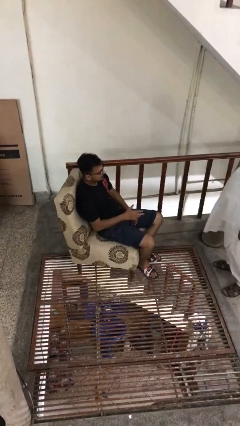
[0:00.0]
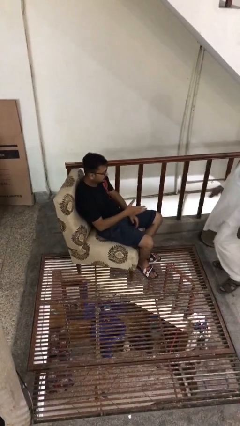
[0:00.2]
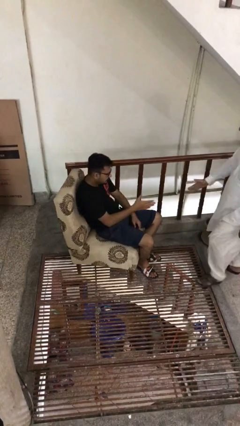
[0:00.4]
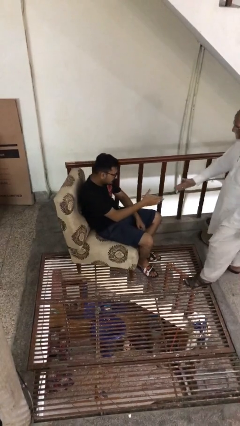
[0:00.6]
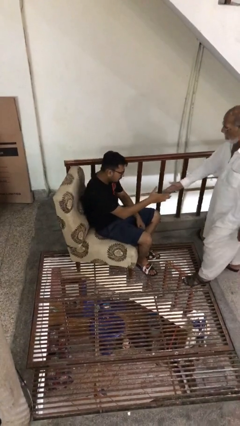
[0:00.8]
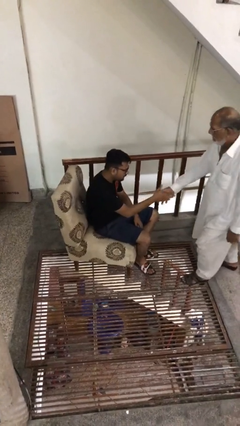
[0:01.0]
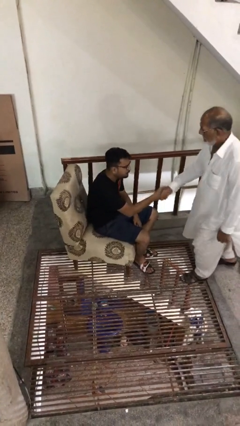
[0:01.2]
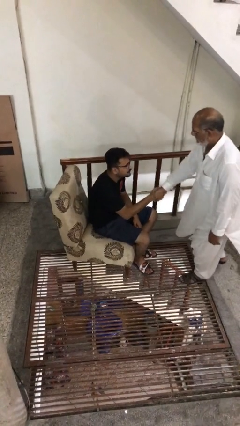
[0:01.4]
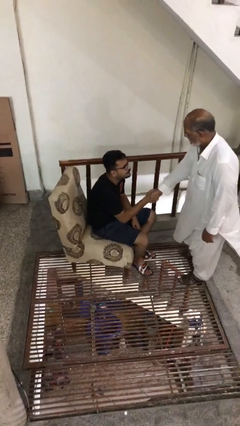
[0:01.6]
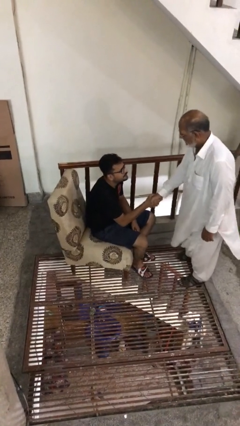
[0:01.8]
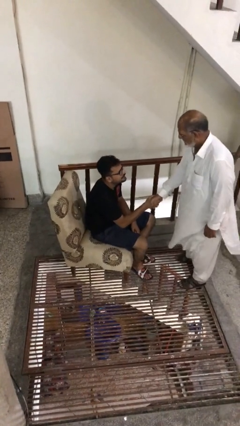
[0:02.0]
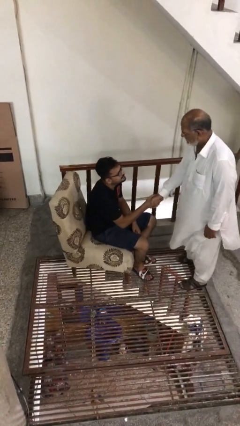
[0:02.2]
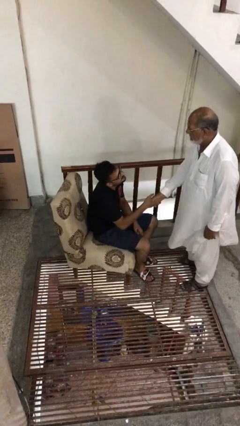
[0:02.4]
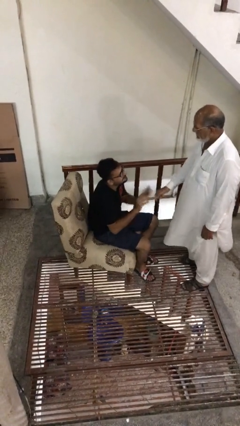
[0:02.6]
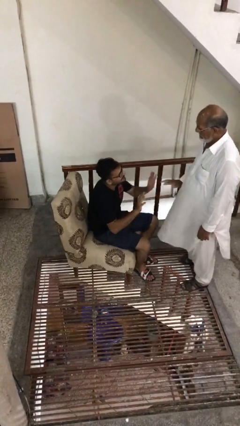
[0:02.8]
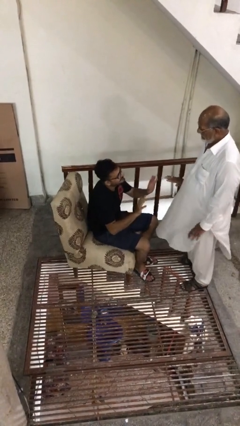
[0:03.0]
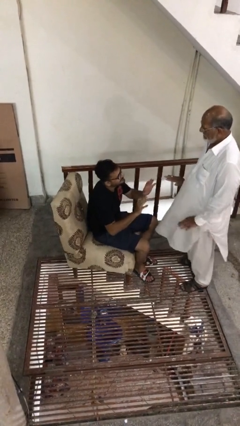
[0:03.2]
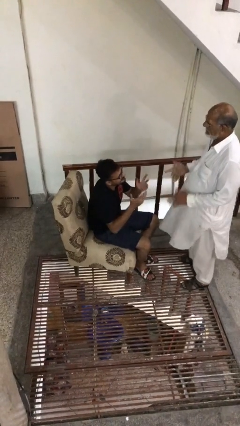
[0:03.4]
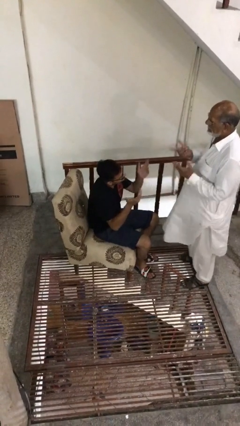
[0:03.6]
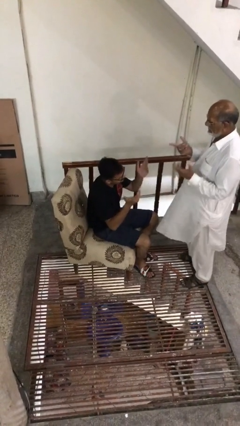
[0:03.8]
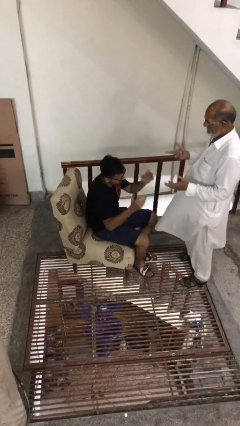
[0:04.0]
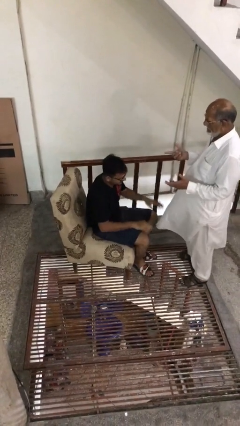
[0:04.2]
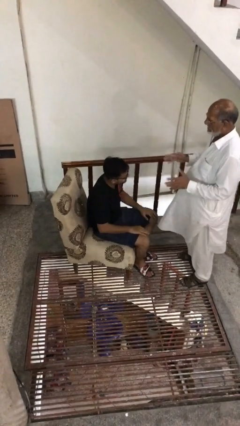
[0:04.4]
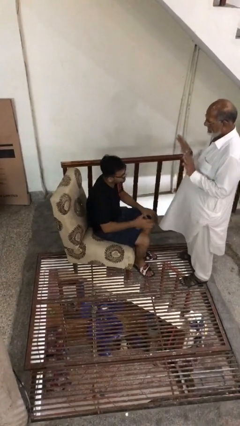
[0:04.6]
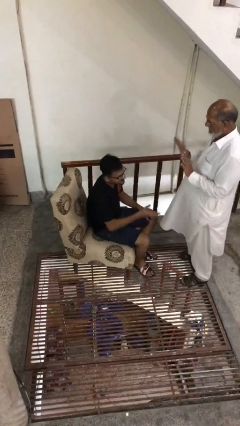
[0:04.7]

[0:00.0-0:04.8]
person shakes hand

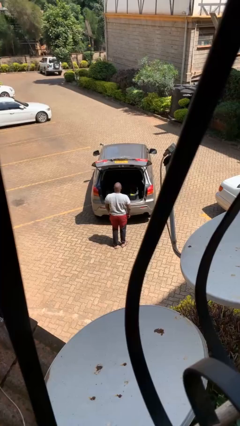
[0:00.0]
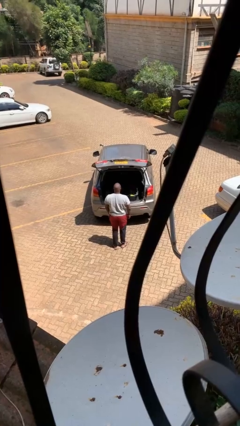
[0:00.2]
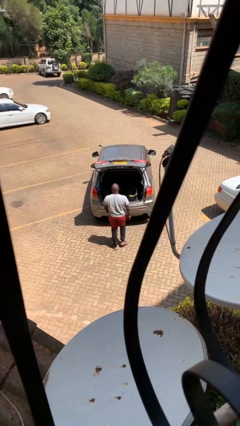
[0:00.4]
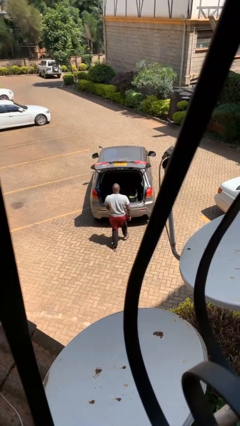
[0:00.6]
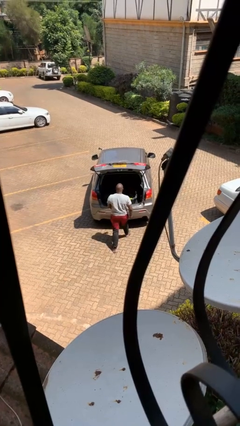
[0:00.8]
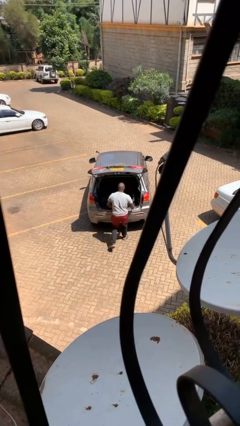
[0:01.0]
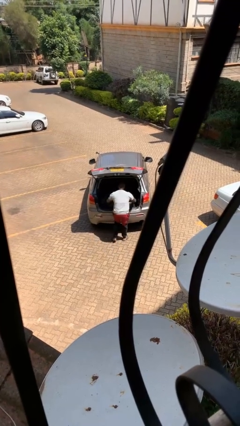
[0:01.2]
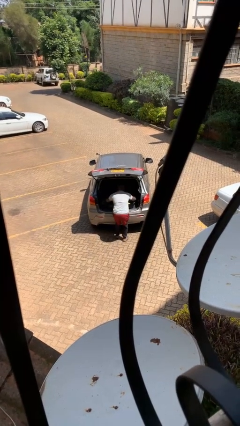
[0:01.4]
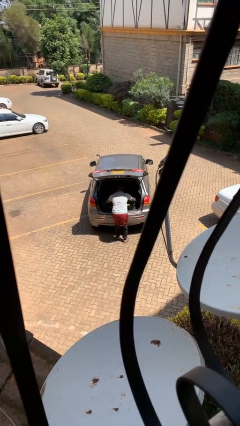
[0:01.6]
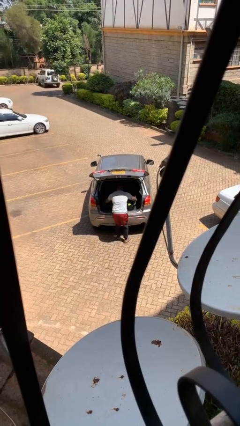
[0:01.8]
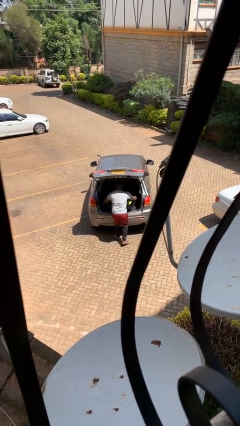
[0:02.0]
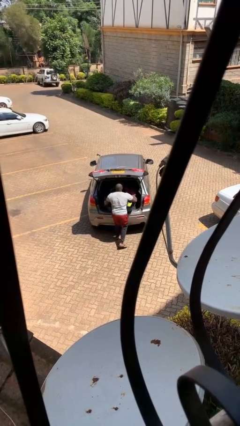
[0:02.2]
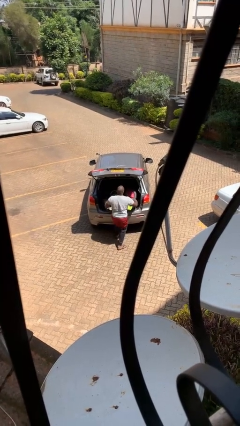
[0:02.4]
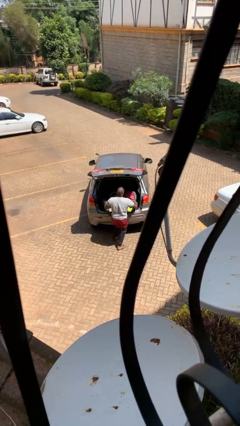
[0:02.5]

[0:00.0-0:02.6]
person unloads car

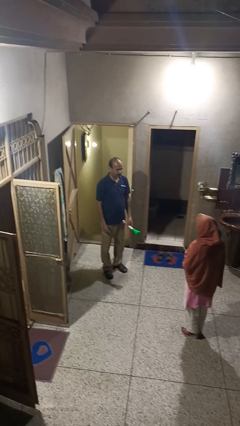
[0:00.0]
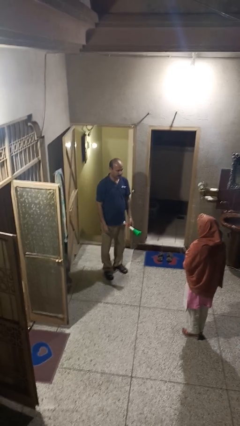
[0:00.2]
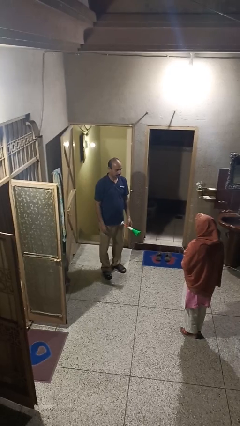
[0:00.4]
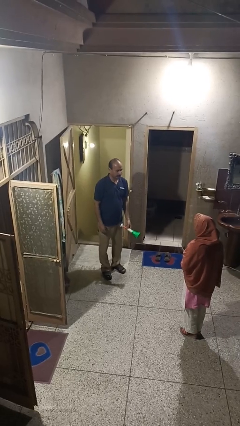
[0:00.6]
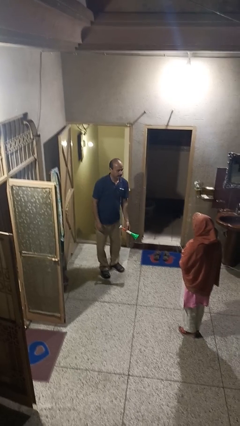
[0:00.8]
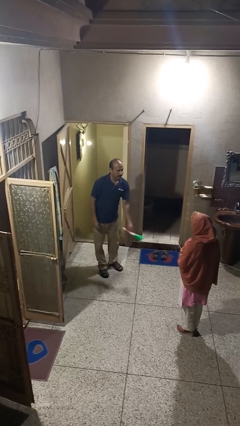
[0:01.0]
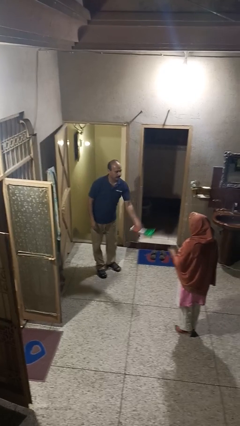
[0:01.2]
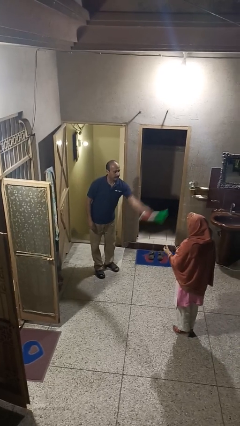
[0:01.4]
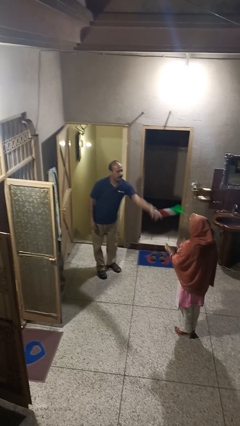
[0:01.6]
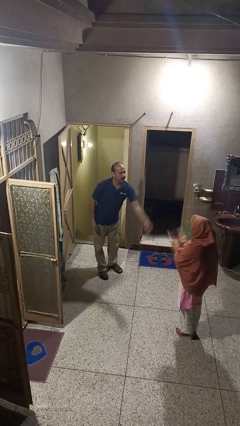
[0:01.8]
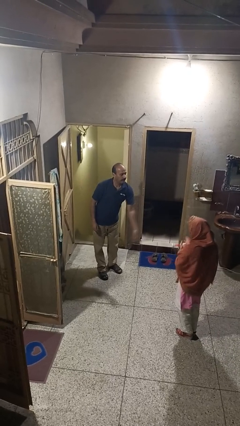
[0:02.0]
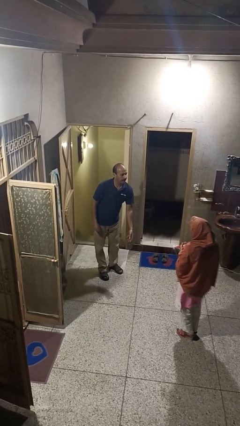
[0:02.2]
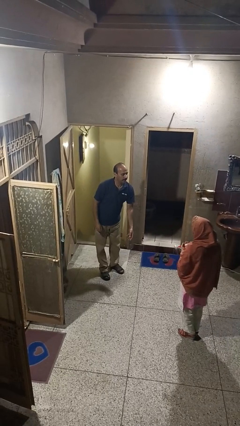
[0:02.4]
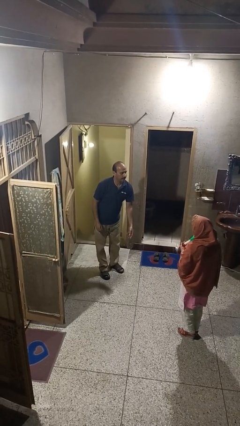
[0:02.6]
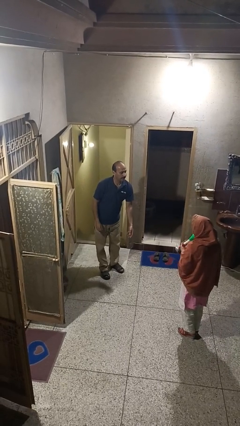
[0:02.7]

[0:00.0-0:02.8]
person throws object to person

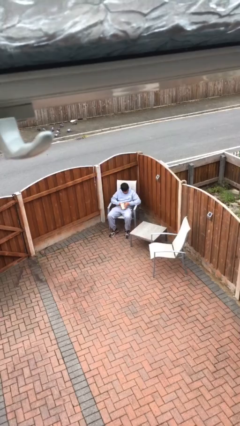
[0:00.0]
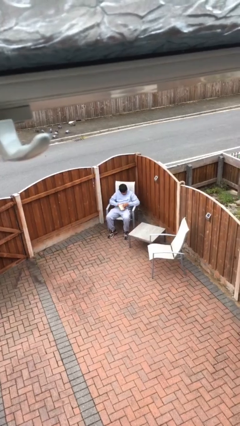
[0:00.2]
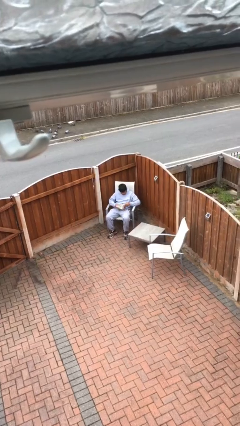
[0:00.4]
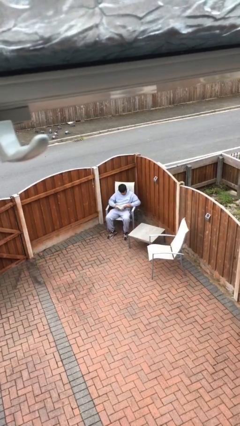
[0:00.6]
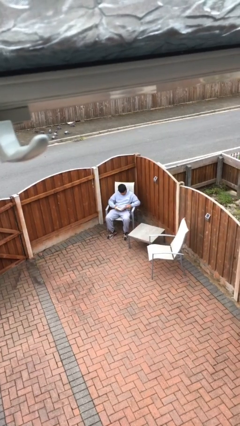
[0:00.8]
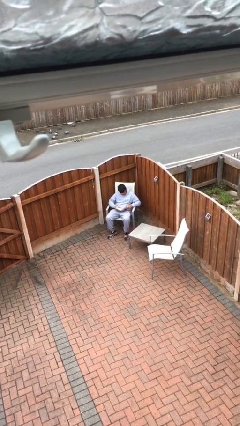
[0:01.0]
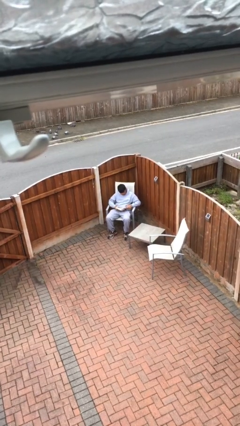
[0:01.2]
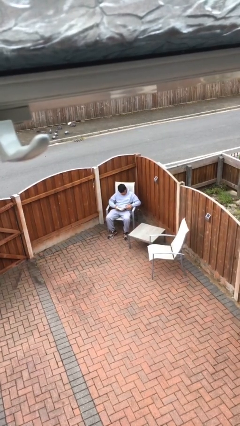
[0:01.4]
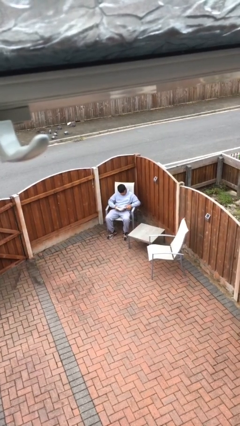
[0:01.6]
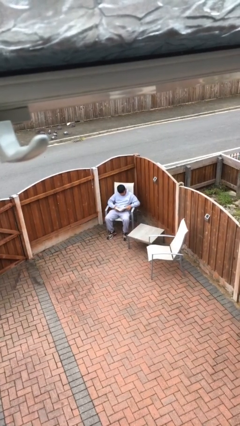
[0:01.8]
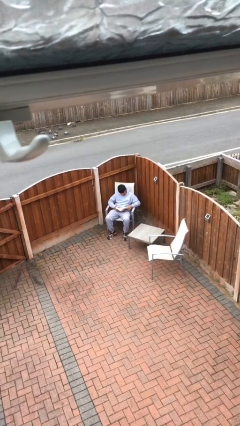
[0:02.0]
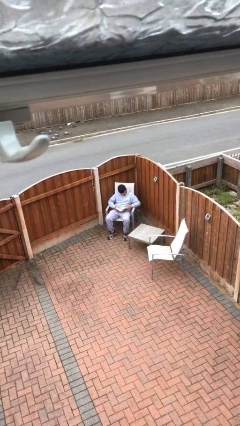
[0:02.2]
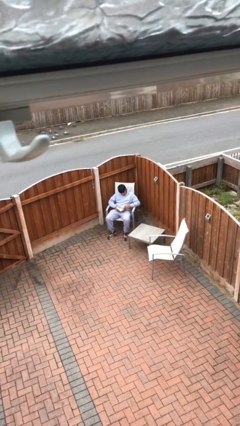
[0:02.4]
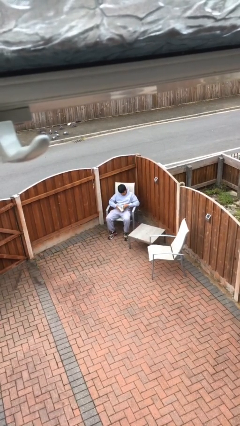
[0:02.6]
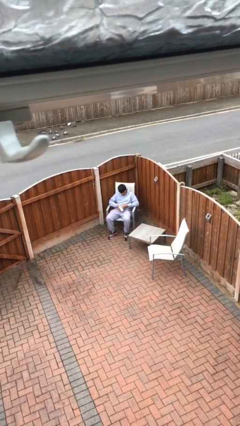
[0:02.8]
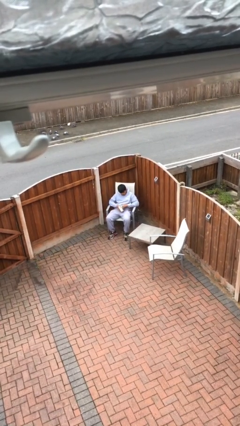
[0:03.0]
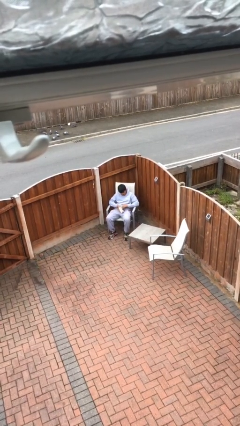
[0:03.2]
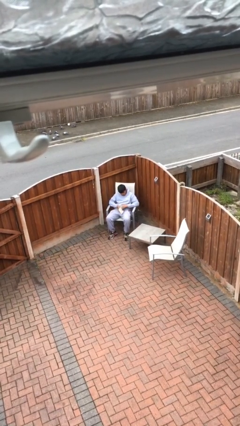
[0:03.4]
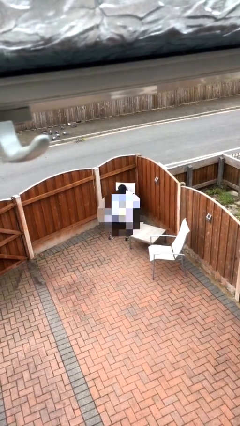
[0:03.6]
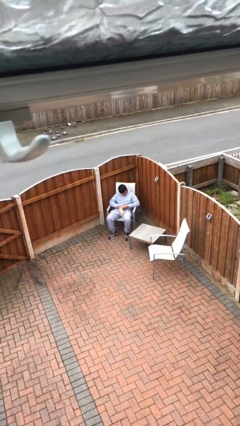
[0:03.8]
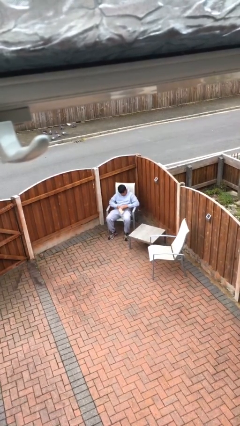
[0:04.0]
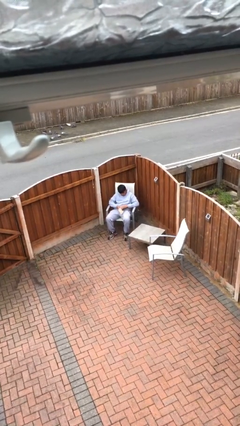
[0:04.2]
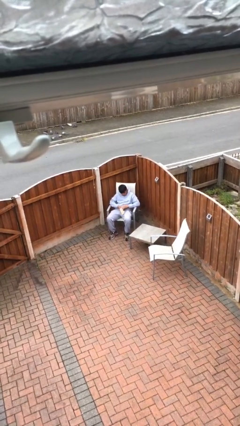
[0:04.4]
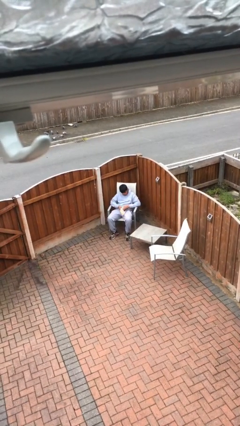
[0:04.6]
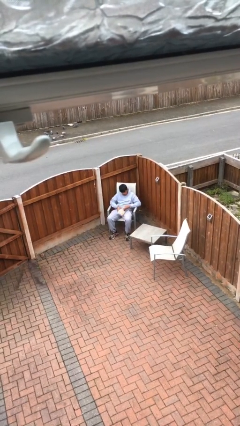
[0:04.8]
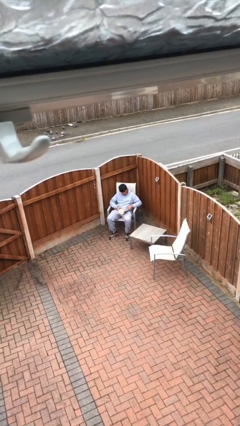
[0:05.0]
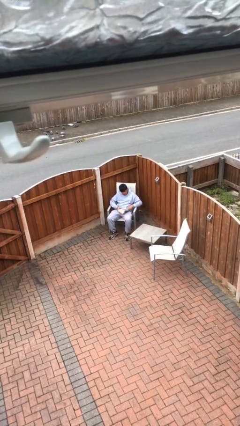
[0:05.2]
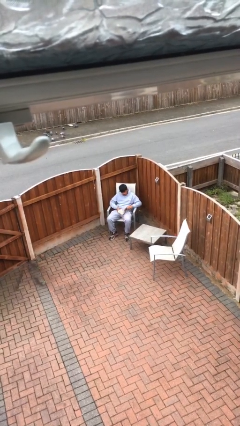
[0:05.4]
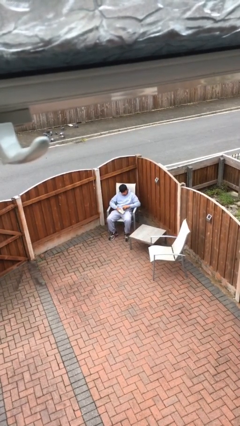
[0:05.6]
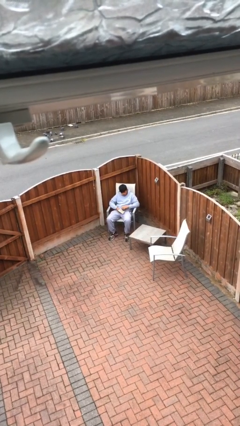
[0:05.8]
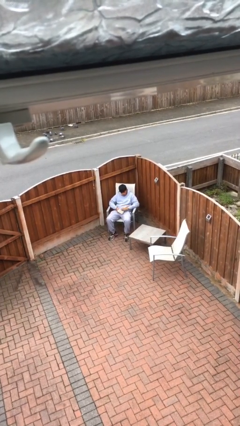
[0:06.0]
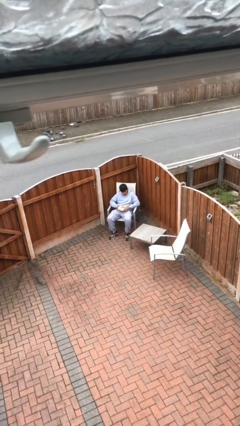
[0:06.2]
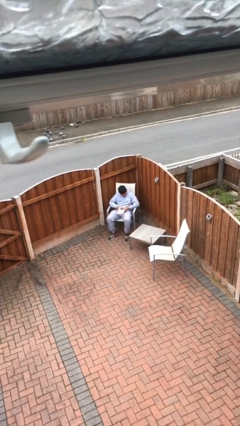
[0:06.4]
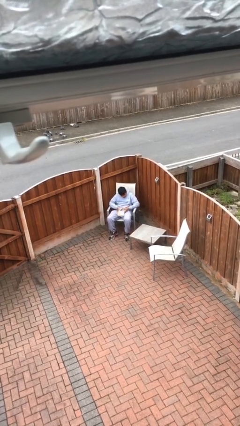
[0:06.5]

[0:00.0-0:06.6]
person reads document

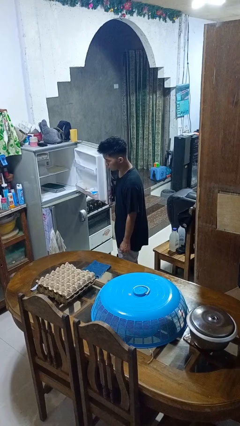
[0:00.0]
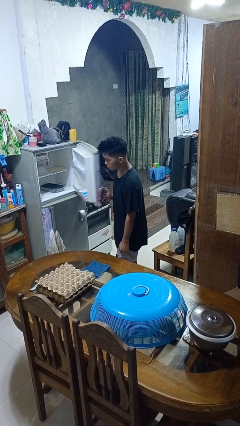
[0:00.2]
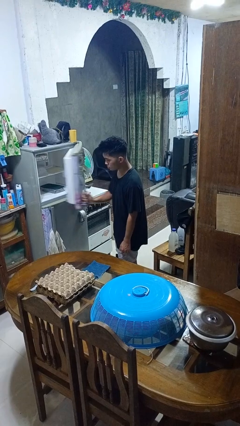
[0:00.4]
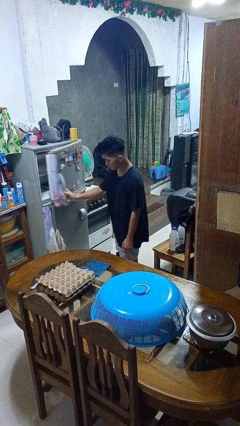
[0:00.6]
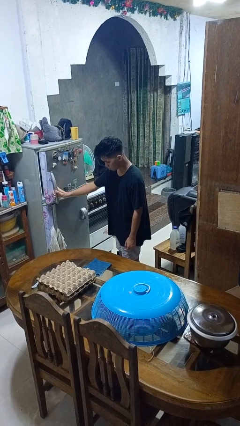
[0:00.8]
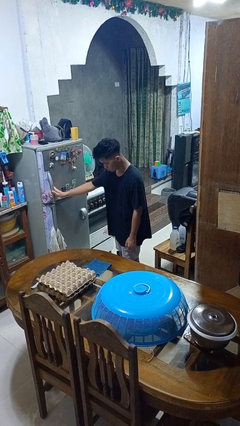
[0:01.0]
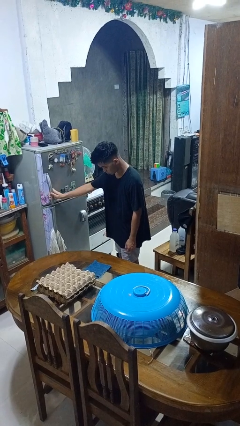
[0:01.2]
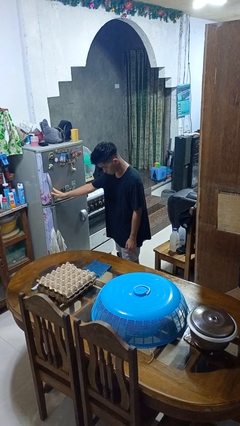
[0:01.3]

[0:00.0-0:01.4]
person closes refrigerator
